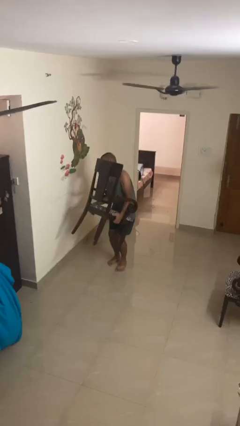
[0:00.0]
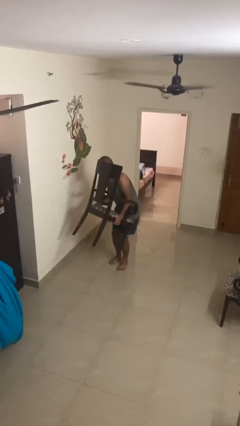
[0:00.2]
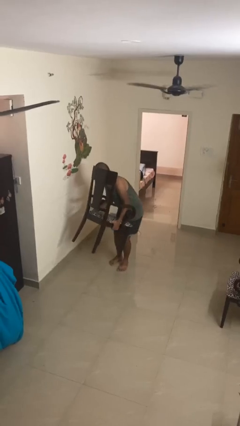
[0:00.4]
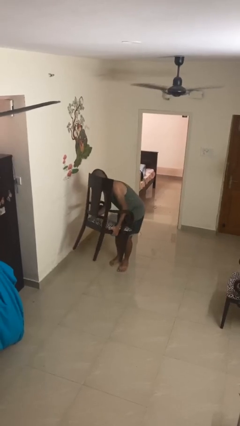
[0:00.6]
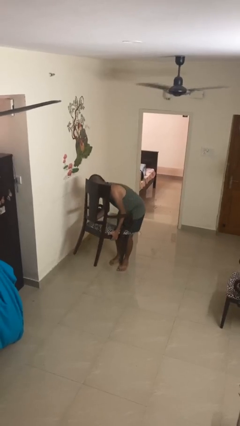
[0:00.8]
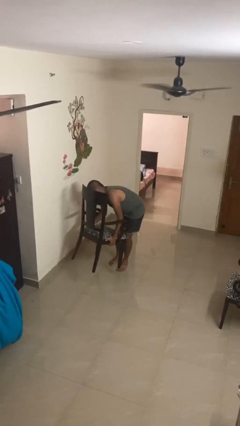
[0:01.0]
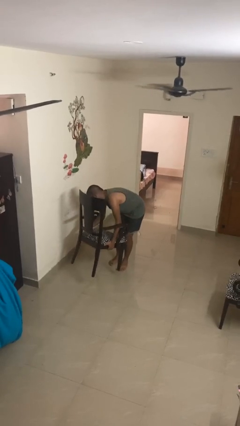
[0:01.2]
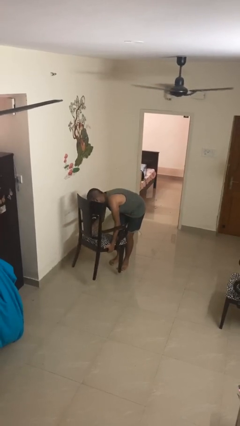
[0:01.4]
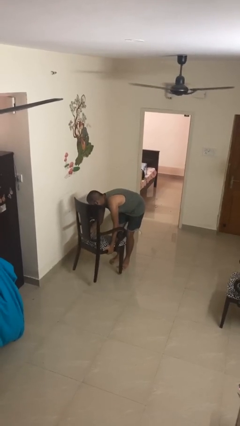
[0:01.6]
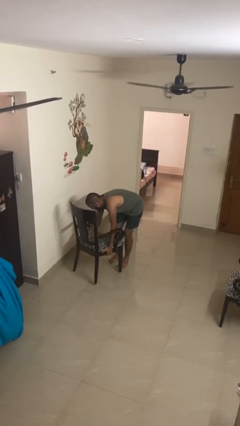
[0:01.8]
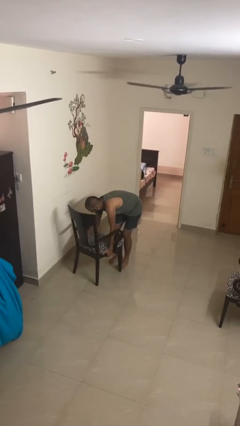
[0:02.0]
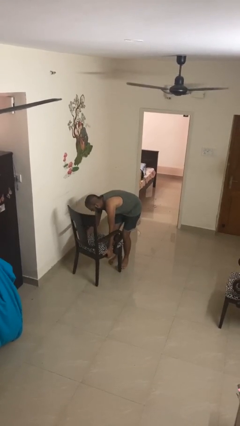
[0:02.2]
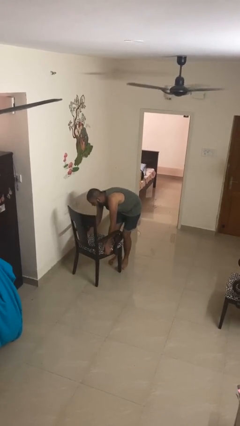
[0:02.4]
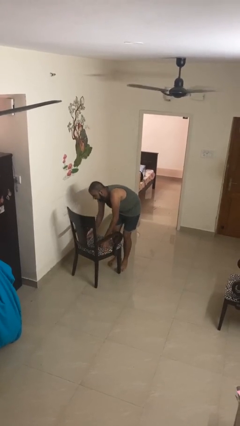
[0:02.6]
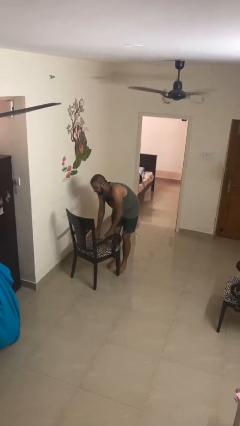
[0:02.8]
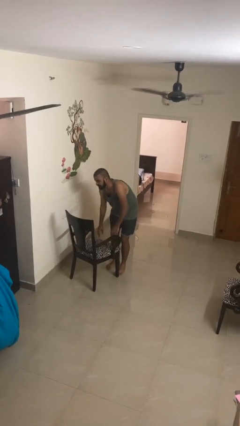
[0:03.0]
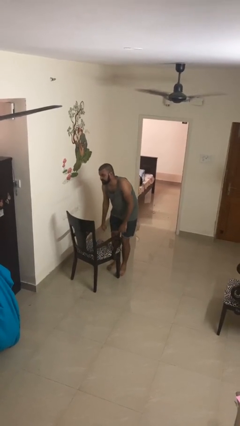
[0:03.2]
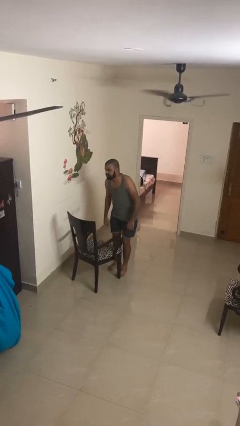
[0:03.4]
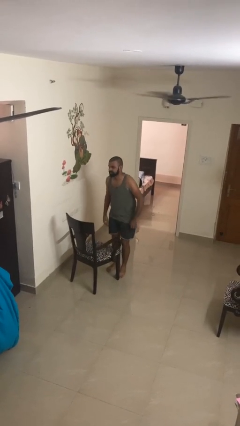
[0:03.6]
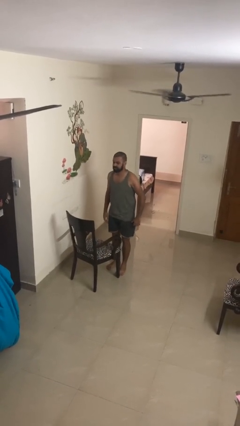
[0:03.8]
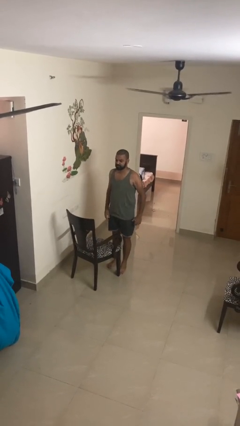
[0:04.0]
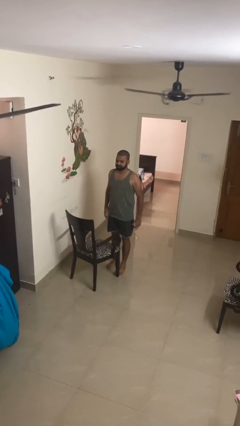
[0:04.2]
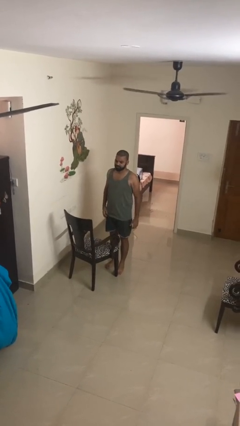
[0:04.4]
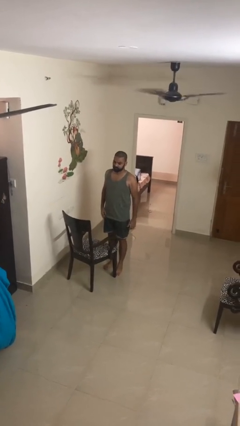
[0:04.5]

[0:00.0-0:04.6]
person puts down object on floor

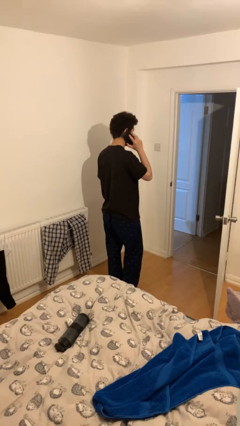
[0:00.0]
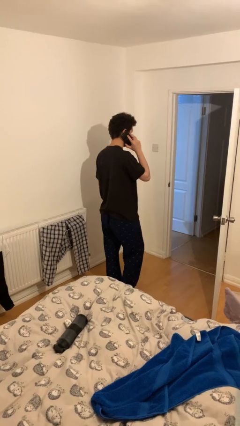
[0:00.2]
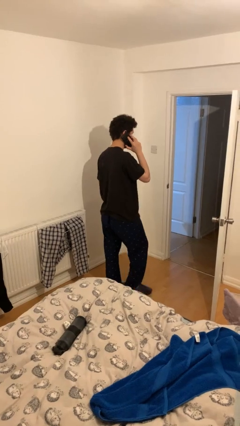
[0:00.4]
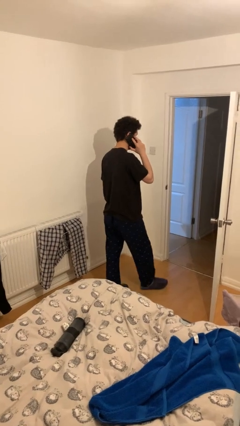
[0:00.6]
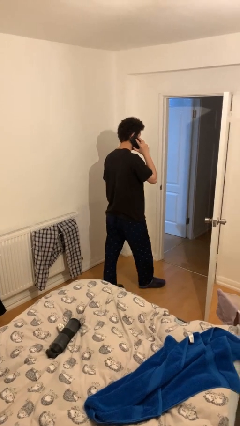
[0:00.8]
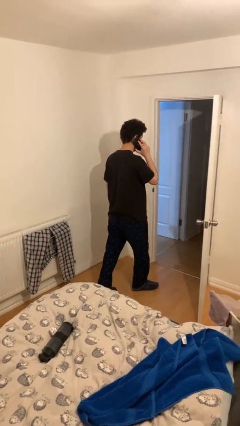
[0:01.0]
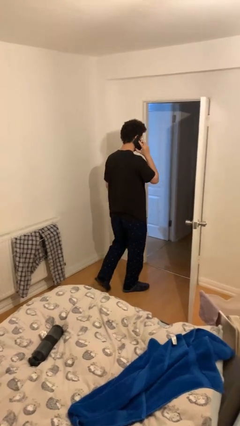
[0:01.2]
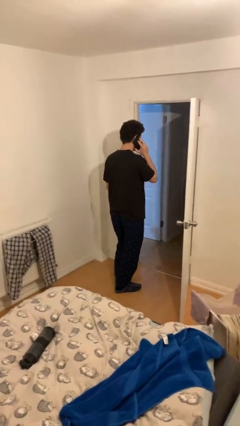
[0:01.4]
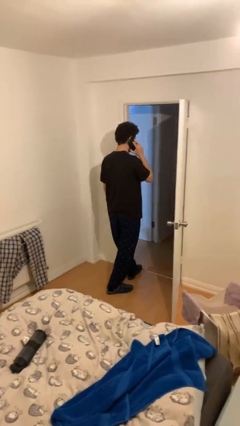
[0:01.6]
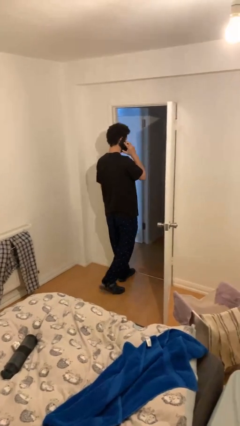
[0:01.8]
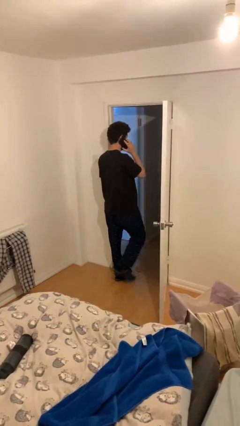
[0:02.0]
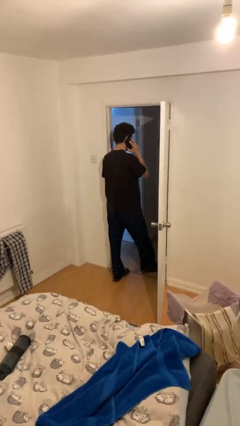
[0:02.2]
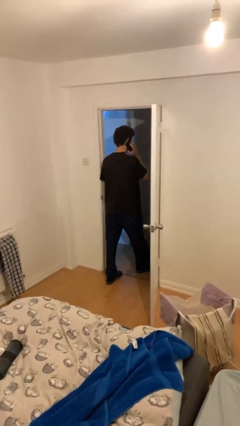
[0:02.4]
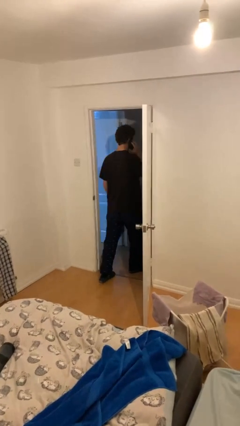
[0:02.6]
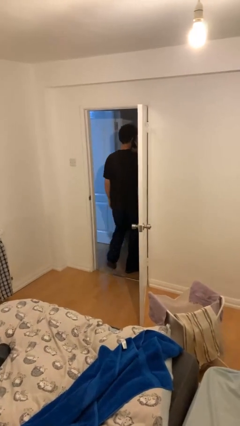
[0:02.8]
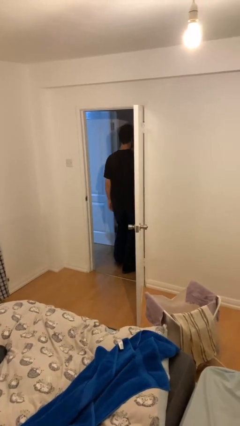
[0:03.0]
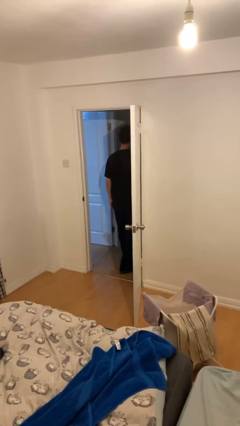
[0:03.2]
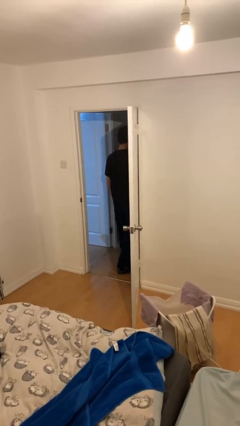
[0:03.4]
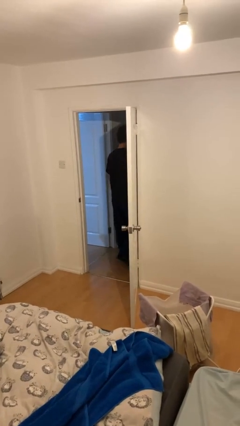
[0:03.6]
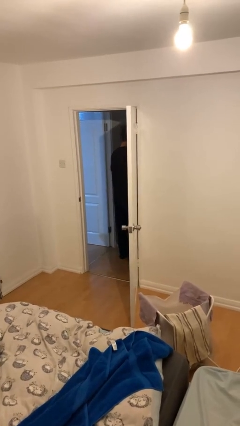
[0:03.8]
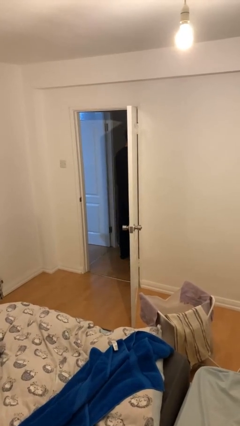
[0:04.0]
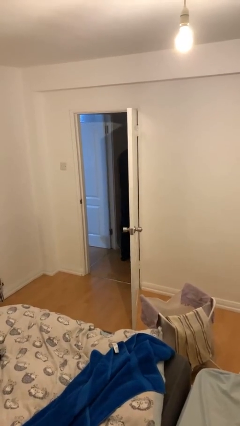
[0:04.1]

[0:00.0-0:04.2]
person exits scene through structure

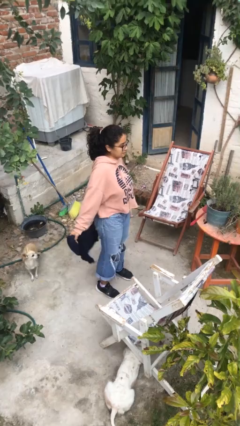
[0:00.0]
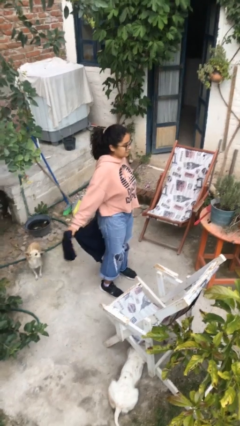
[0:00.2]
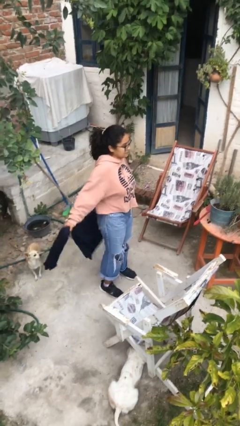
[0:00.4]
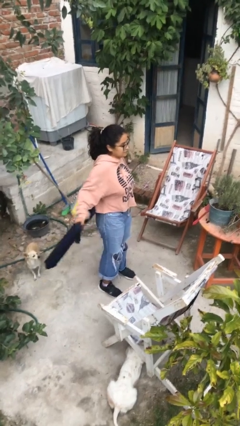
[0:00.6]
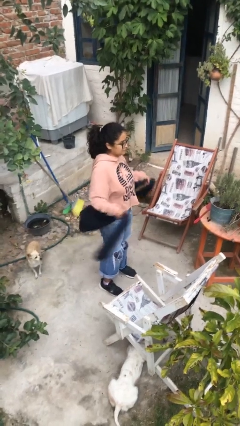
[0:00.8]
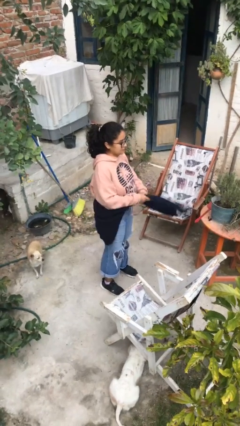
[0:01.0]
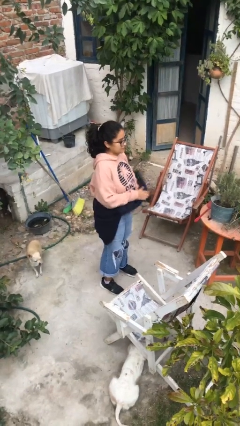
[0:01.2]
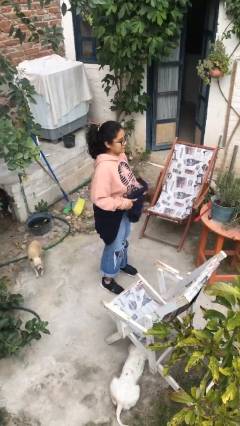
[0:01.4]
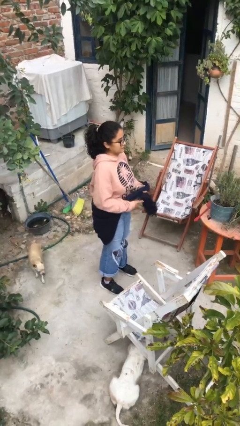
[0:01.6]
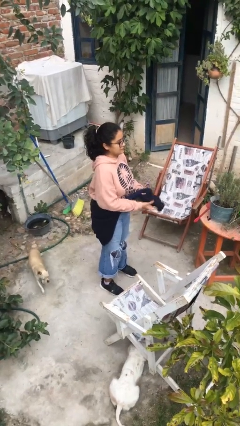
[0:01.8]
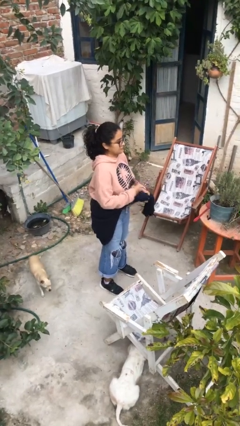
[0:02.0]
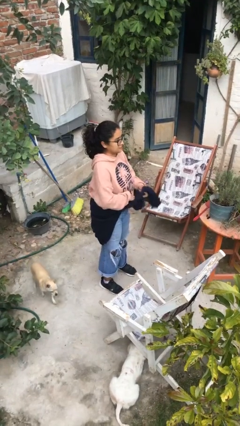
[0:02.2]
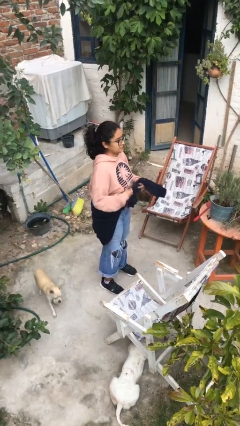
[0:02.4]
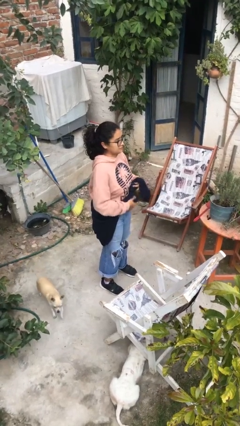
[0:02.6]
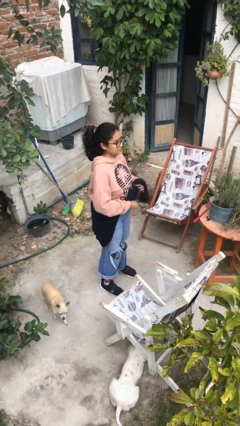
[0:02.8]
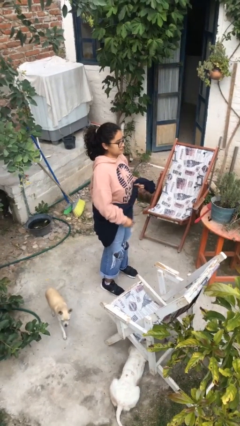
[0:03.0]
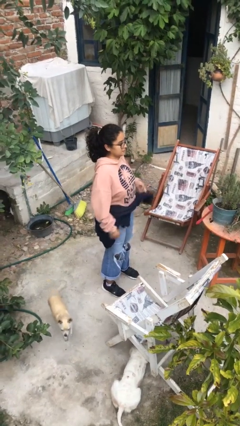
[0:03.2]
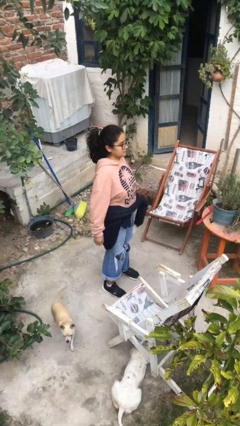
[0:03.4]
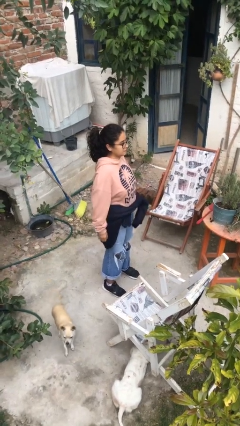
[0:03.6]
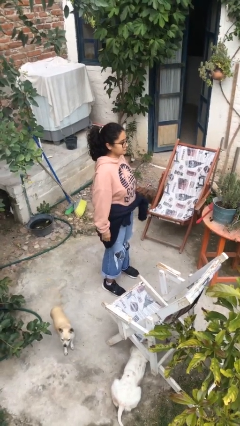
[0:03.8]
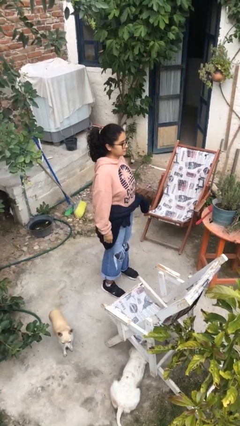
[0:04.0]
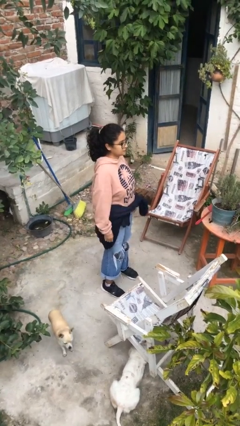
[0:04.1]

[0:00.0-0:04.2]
person ties jacket around waist

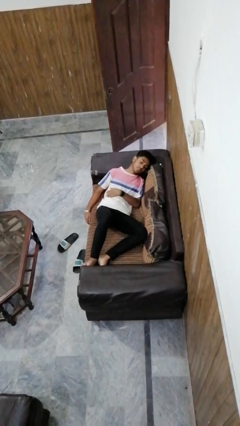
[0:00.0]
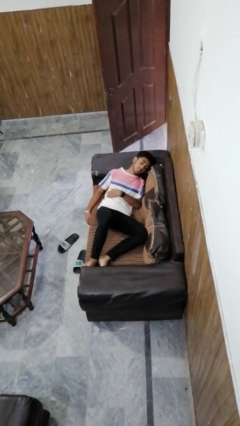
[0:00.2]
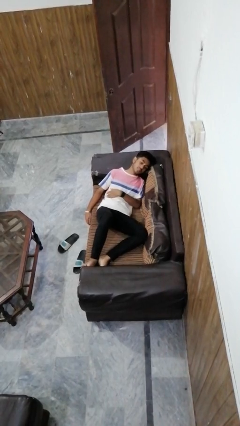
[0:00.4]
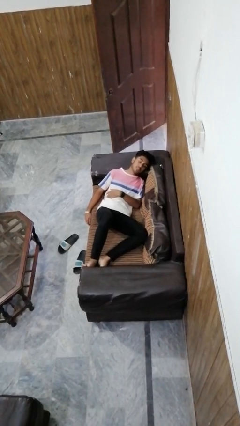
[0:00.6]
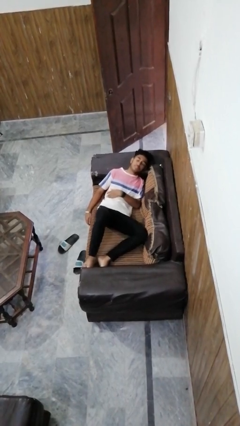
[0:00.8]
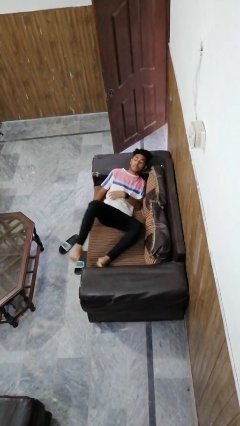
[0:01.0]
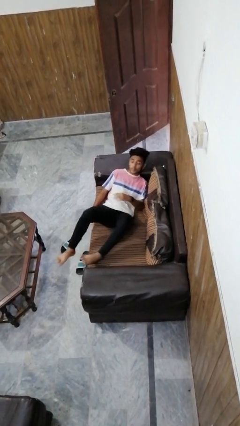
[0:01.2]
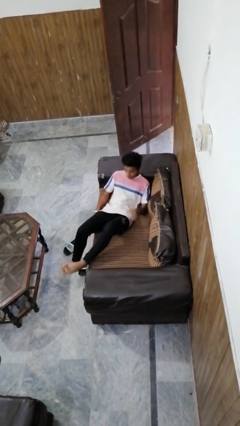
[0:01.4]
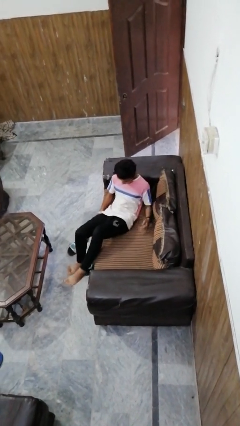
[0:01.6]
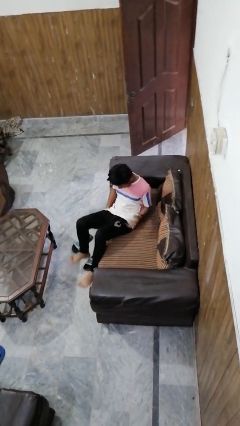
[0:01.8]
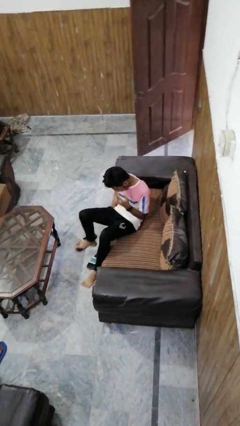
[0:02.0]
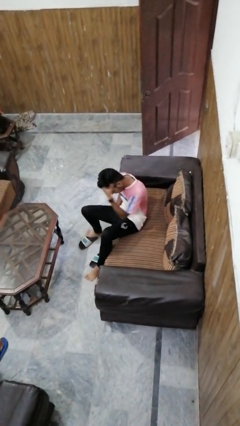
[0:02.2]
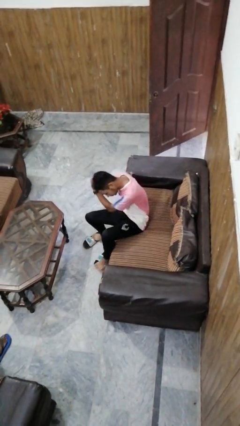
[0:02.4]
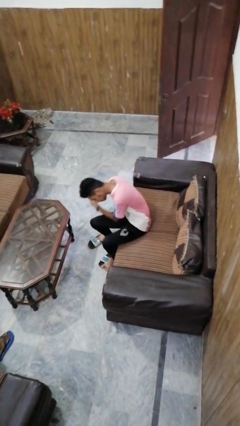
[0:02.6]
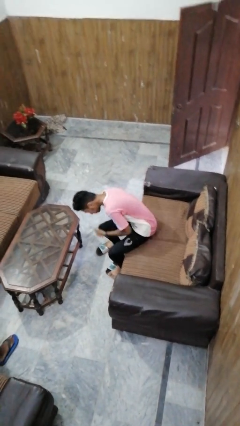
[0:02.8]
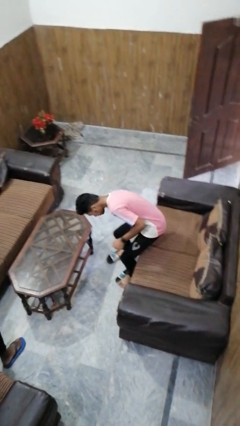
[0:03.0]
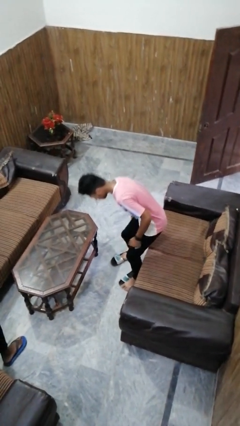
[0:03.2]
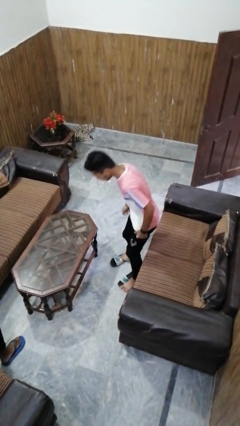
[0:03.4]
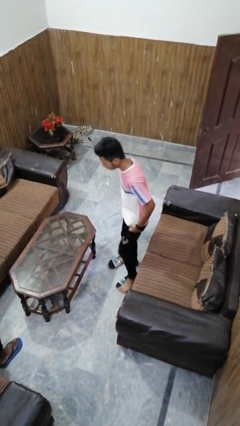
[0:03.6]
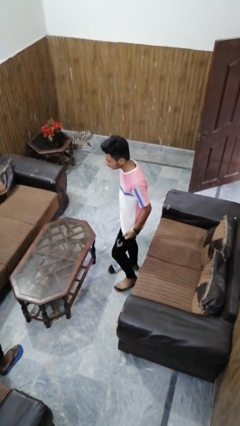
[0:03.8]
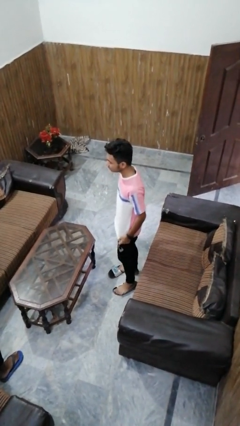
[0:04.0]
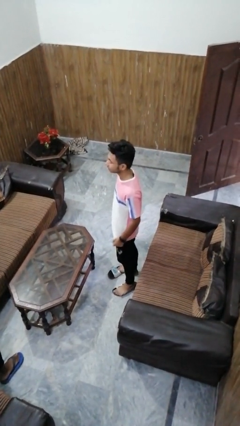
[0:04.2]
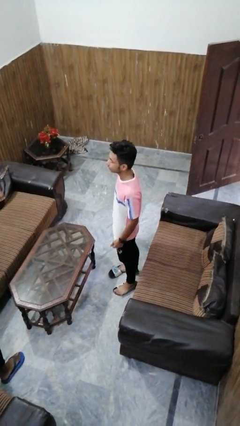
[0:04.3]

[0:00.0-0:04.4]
person stands up

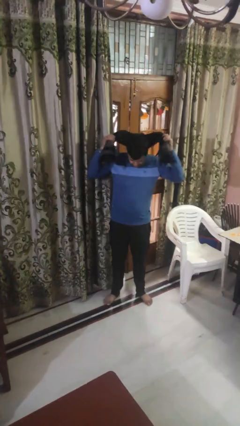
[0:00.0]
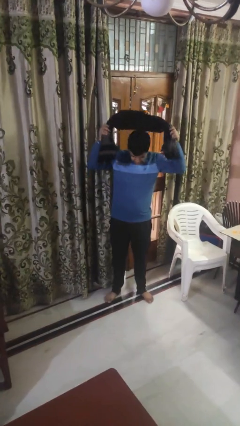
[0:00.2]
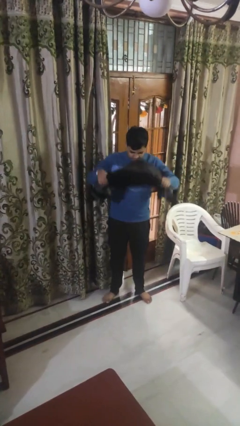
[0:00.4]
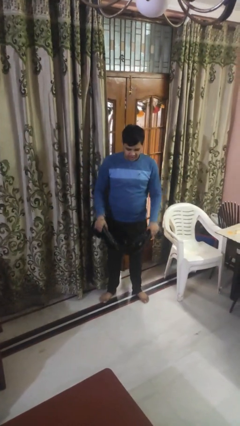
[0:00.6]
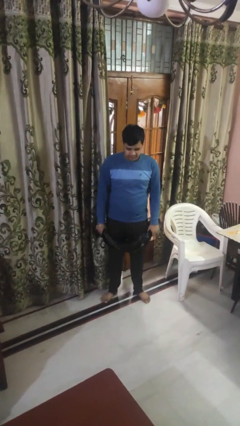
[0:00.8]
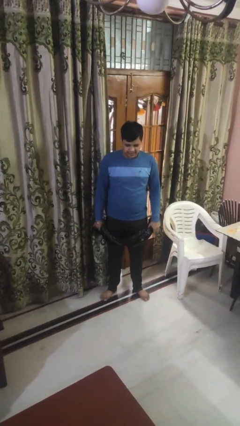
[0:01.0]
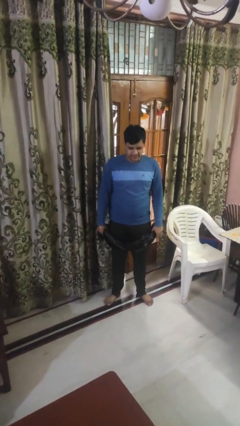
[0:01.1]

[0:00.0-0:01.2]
person takes off scarf
